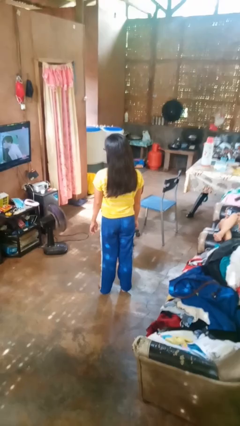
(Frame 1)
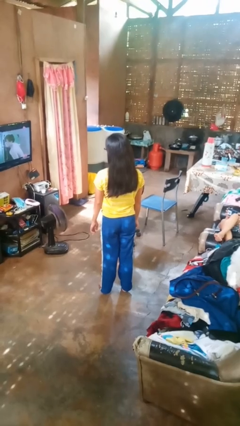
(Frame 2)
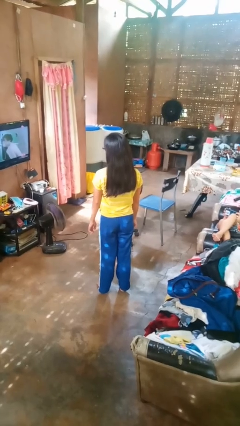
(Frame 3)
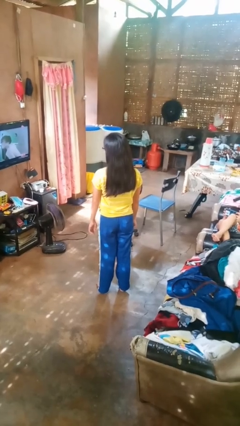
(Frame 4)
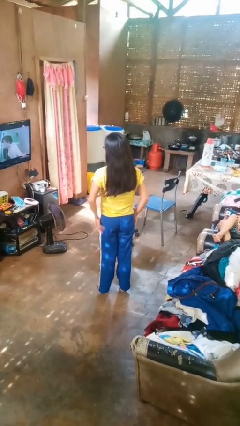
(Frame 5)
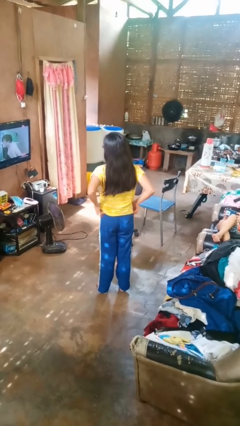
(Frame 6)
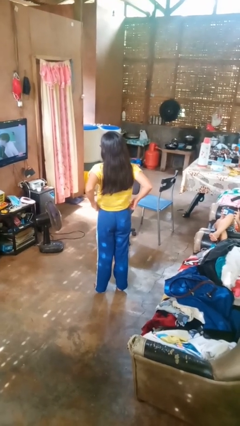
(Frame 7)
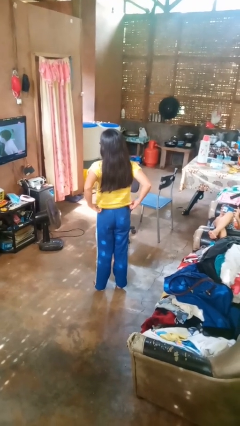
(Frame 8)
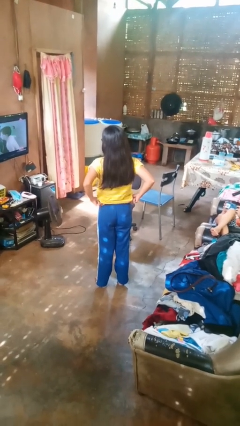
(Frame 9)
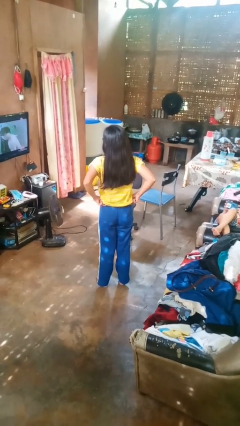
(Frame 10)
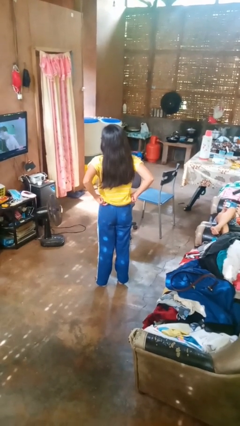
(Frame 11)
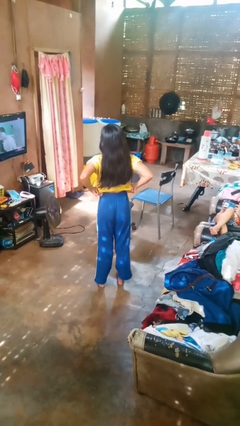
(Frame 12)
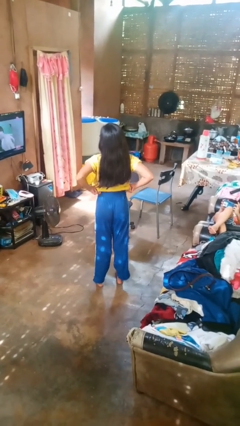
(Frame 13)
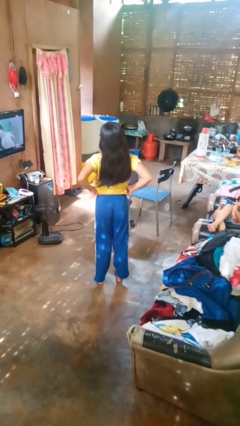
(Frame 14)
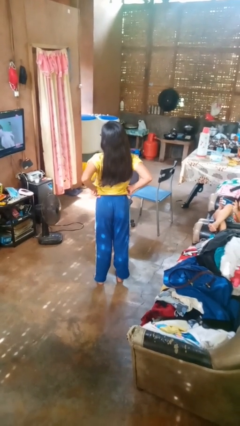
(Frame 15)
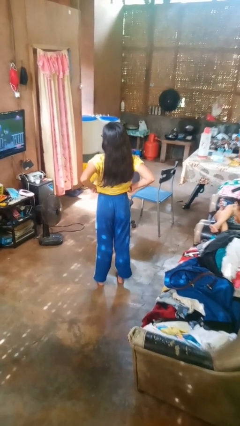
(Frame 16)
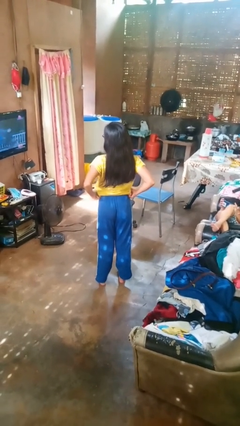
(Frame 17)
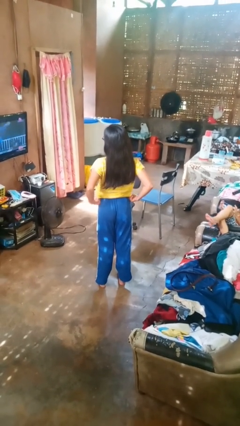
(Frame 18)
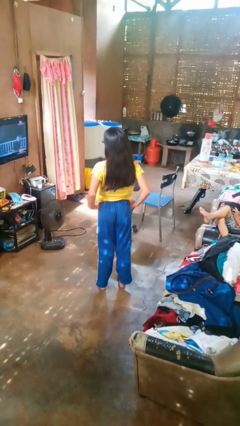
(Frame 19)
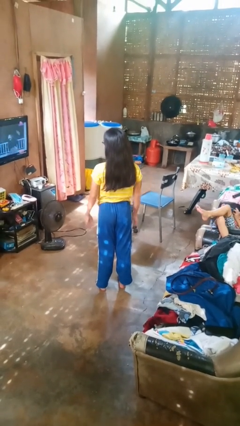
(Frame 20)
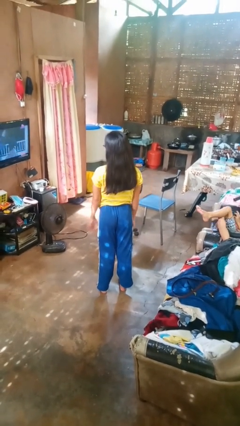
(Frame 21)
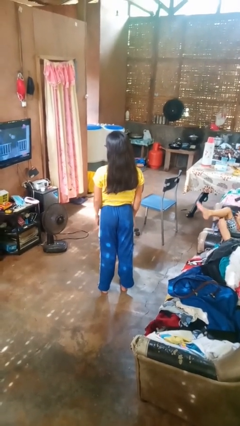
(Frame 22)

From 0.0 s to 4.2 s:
person hikes up pants

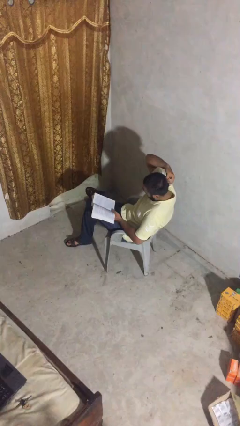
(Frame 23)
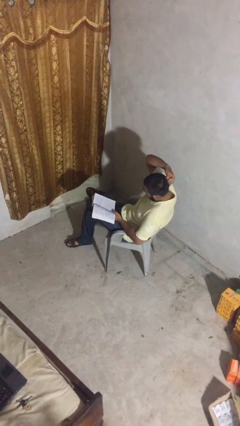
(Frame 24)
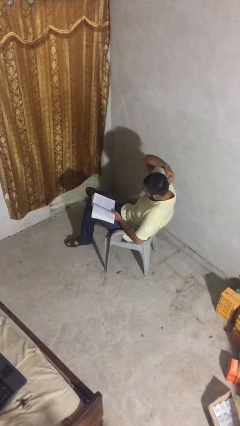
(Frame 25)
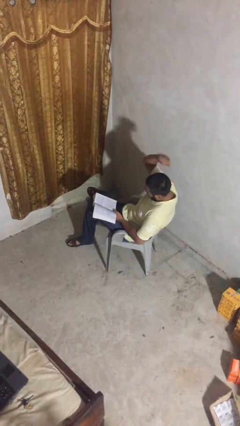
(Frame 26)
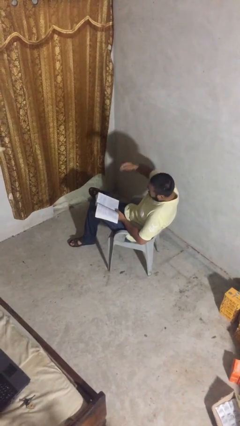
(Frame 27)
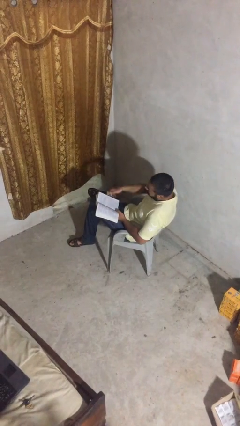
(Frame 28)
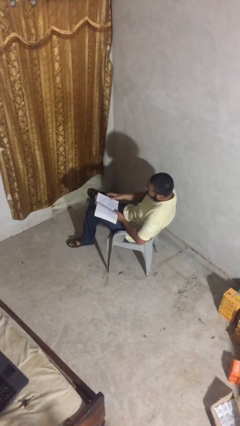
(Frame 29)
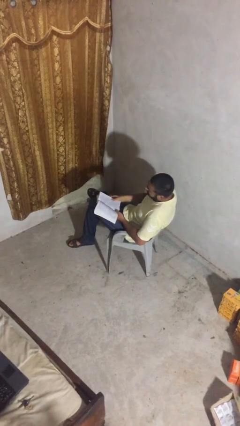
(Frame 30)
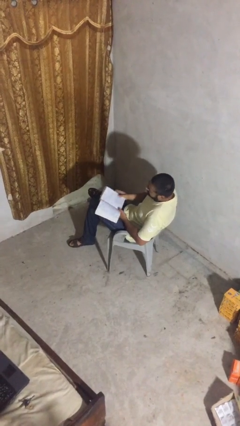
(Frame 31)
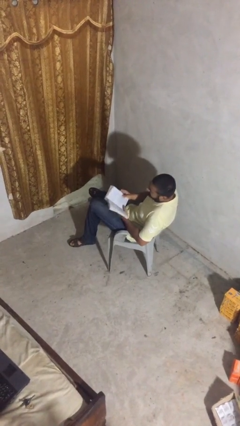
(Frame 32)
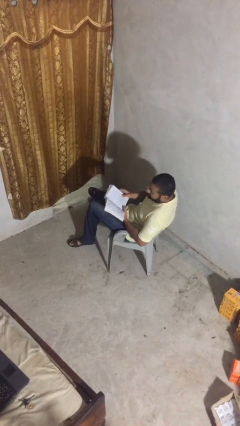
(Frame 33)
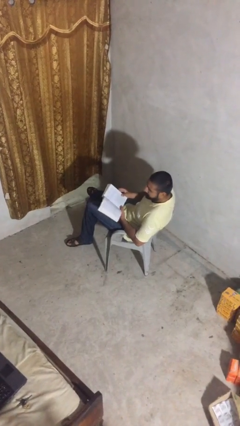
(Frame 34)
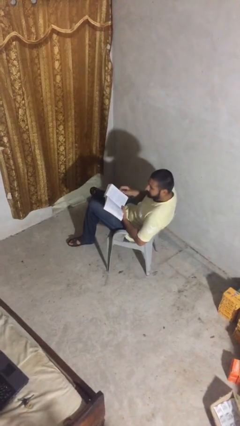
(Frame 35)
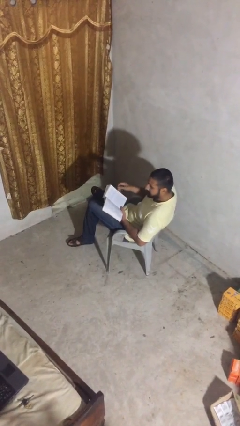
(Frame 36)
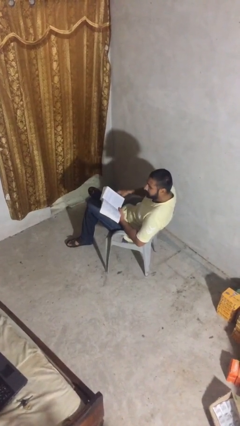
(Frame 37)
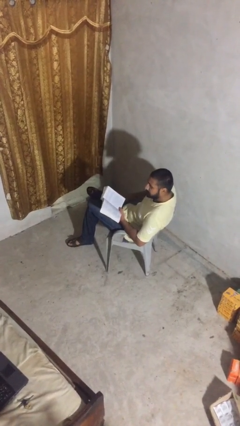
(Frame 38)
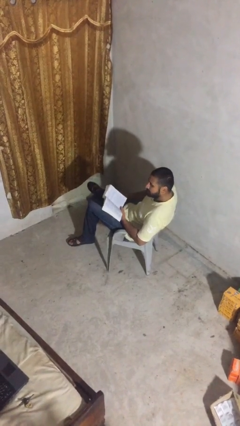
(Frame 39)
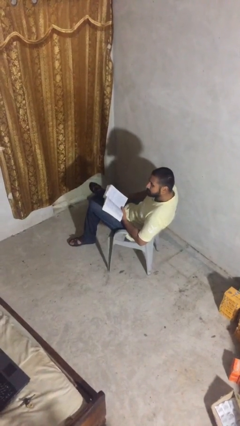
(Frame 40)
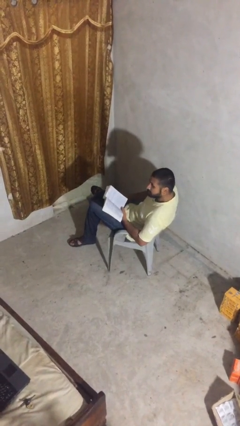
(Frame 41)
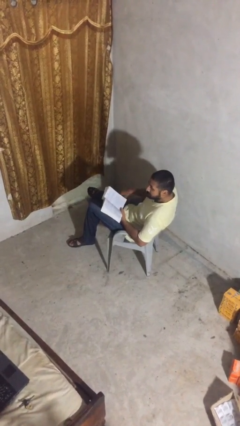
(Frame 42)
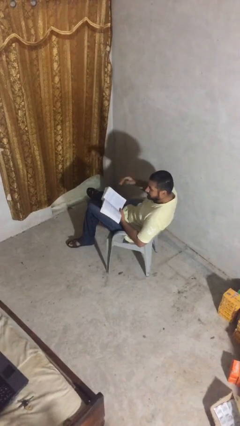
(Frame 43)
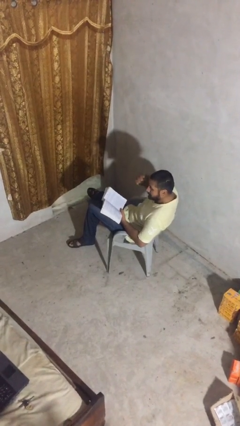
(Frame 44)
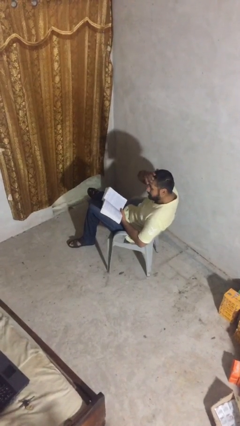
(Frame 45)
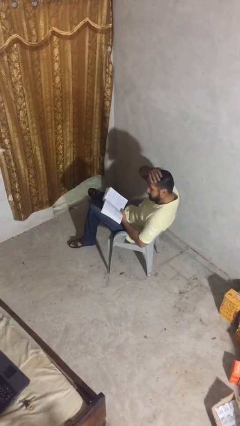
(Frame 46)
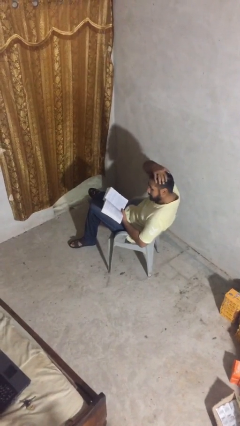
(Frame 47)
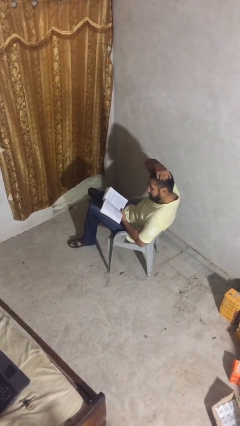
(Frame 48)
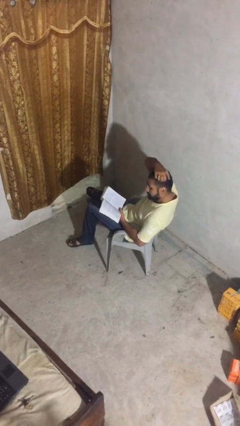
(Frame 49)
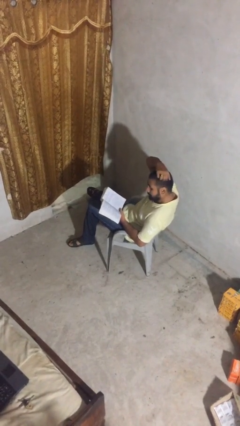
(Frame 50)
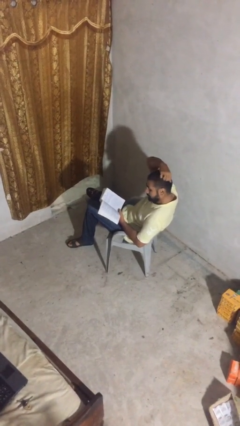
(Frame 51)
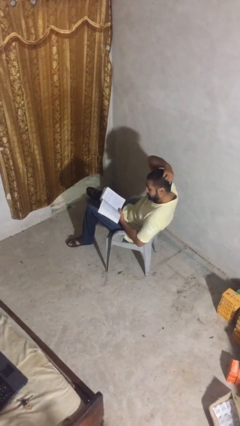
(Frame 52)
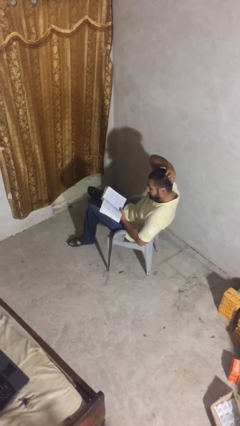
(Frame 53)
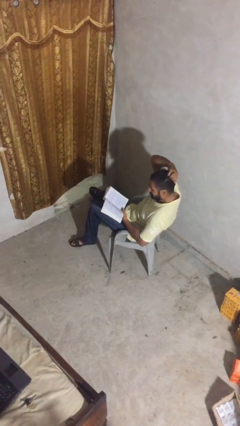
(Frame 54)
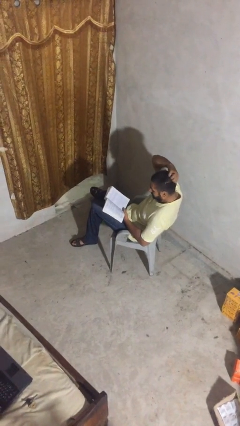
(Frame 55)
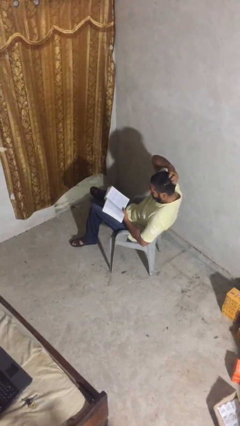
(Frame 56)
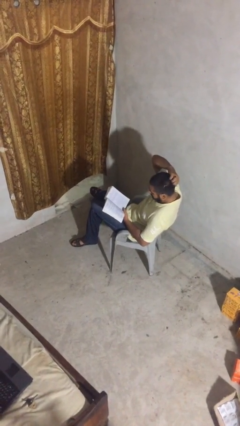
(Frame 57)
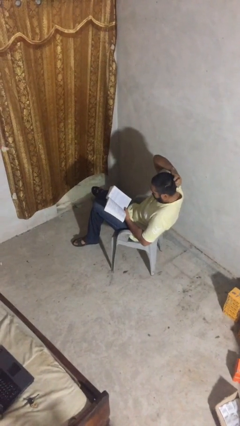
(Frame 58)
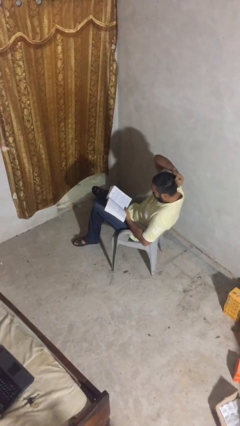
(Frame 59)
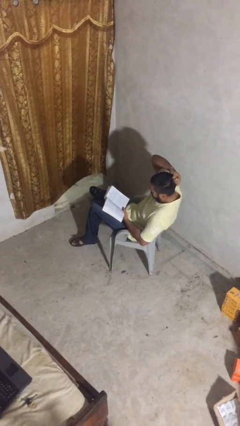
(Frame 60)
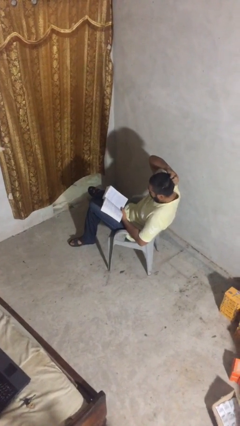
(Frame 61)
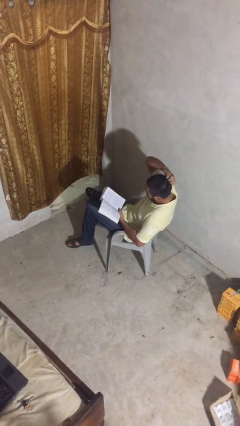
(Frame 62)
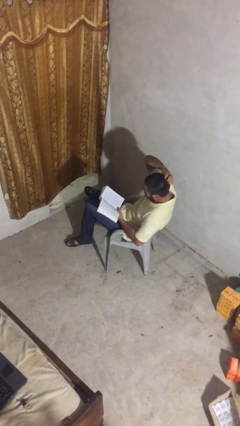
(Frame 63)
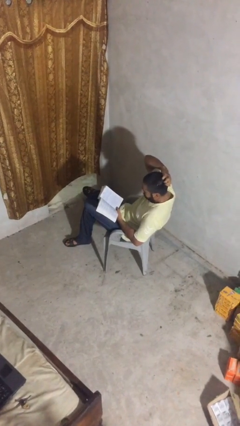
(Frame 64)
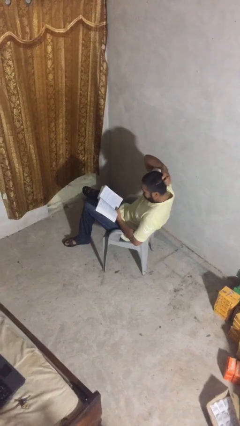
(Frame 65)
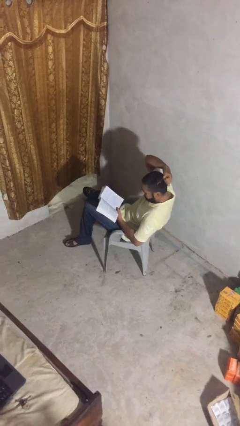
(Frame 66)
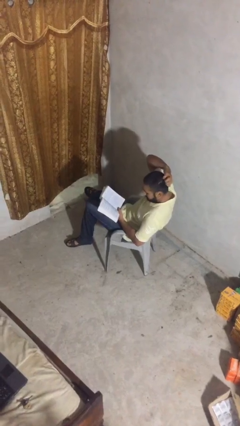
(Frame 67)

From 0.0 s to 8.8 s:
person reads document

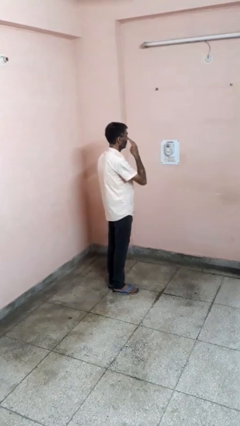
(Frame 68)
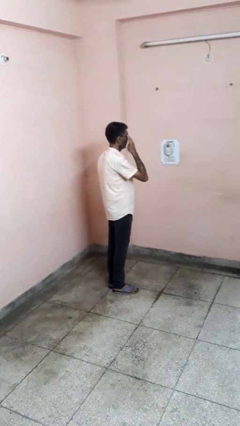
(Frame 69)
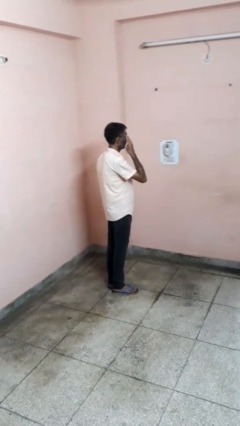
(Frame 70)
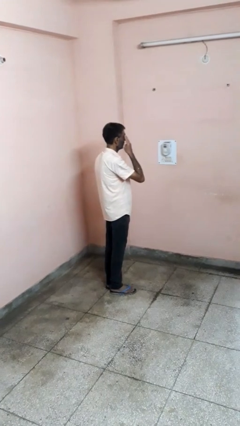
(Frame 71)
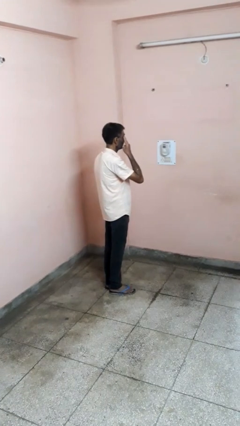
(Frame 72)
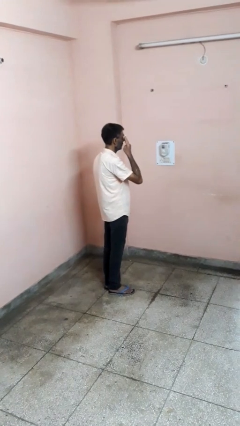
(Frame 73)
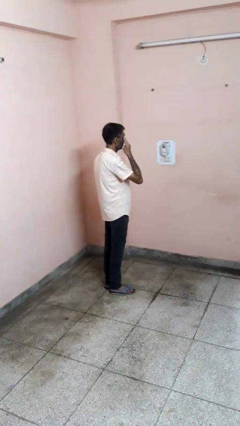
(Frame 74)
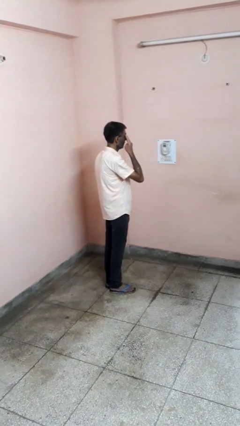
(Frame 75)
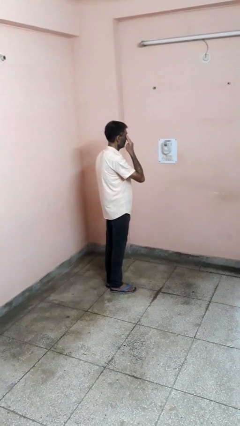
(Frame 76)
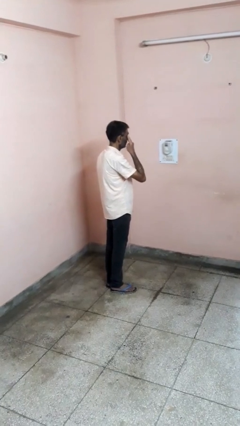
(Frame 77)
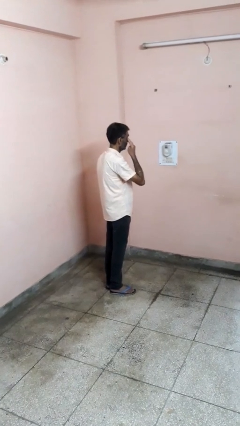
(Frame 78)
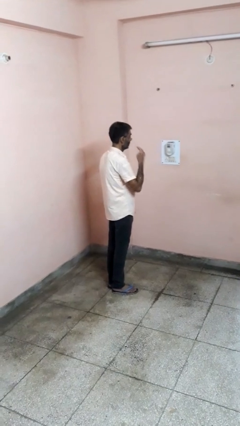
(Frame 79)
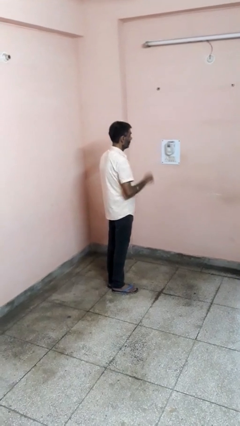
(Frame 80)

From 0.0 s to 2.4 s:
person rubs eyes

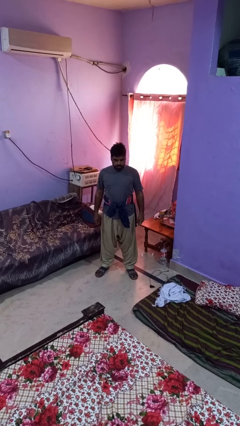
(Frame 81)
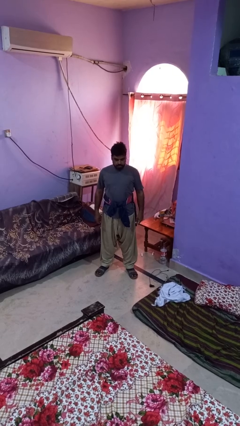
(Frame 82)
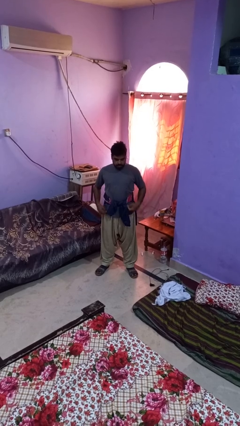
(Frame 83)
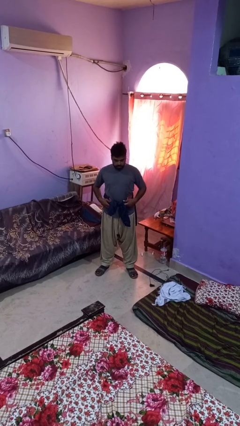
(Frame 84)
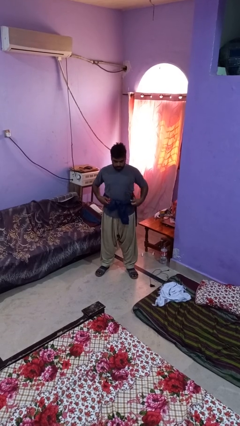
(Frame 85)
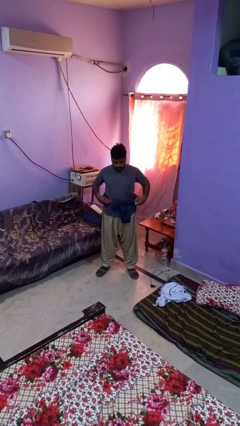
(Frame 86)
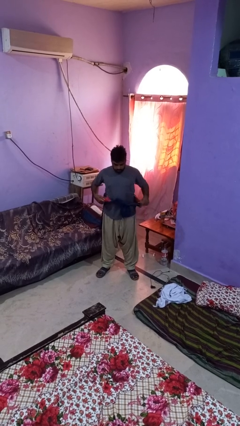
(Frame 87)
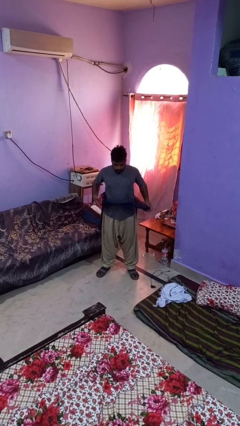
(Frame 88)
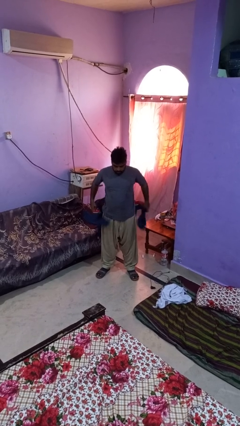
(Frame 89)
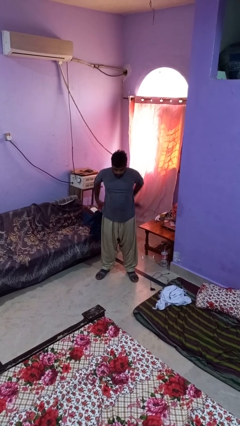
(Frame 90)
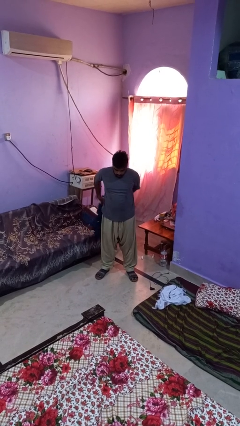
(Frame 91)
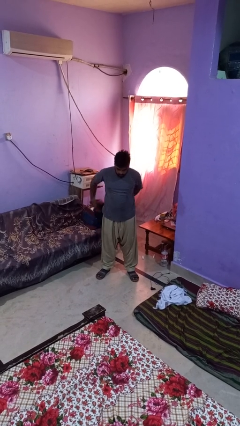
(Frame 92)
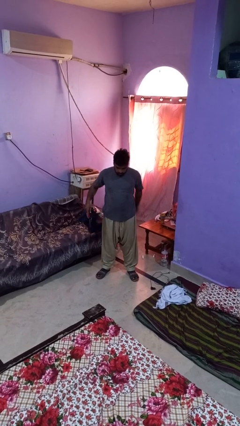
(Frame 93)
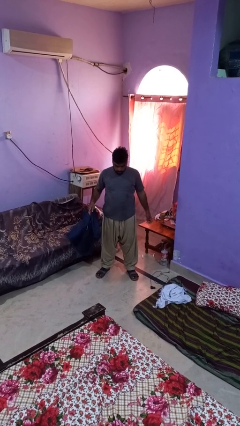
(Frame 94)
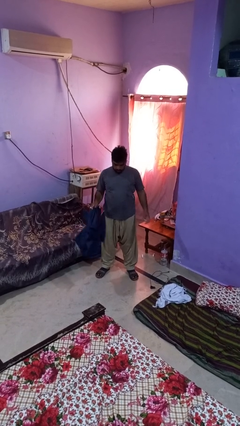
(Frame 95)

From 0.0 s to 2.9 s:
person unties jacket around waist
